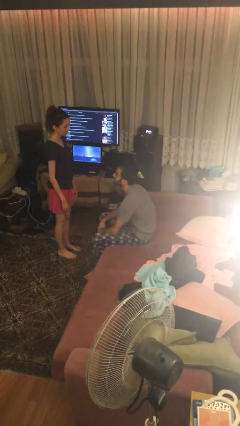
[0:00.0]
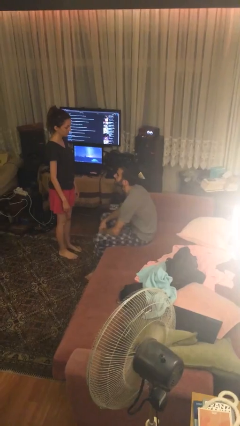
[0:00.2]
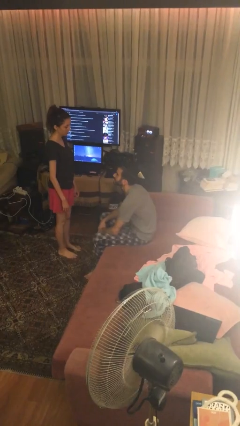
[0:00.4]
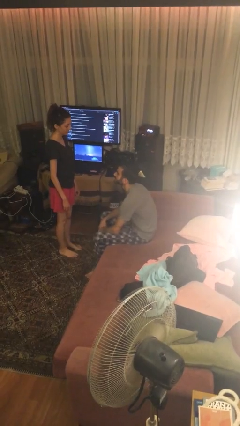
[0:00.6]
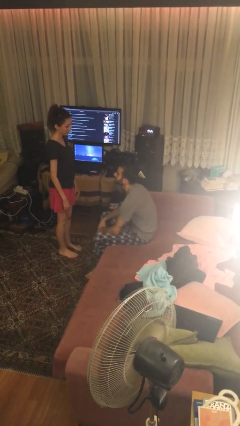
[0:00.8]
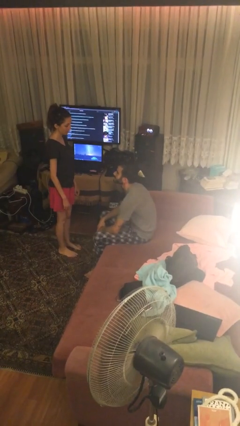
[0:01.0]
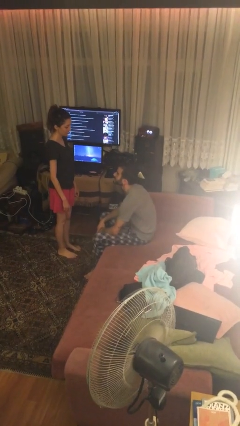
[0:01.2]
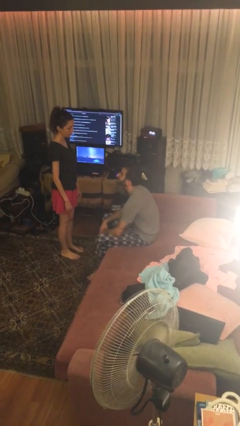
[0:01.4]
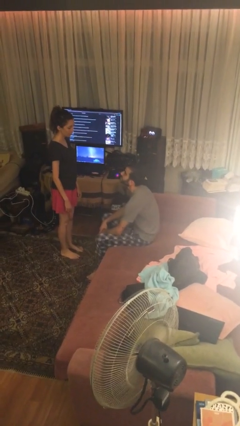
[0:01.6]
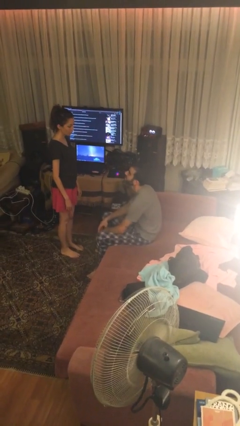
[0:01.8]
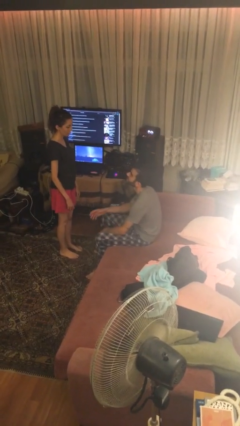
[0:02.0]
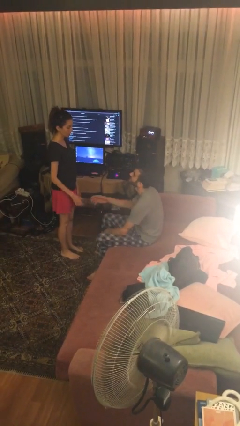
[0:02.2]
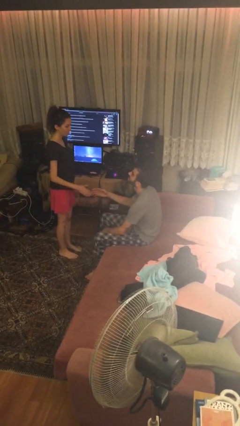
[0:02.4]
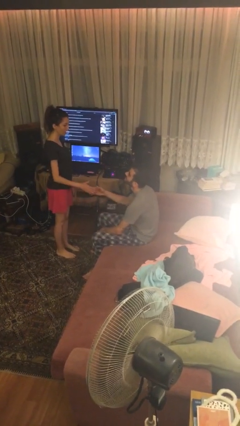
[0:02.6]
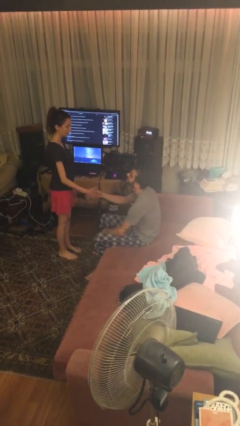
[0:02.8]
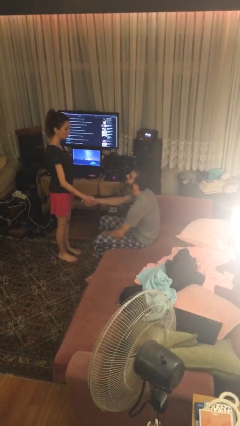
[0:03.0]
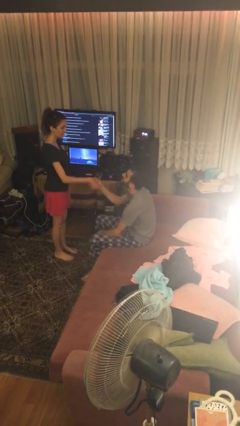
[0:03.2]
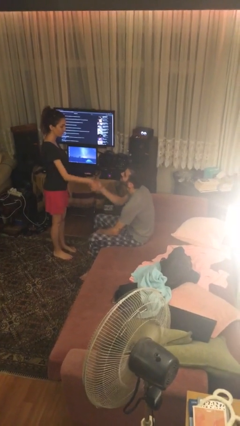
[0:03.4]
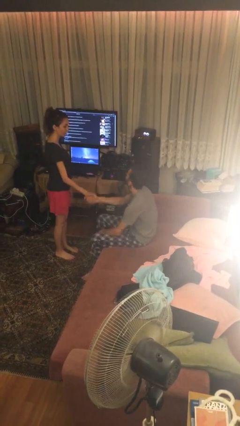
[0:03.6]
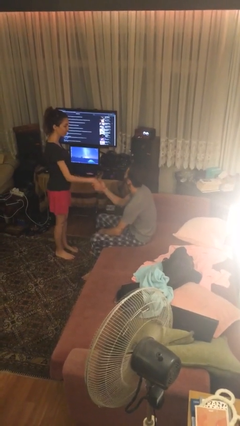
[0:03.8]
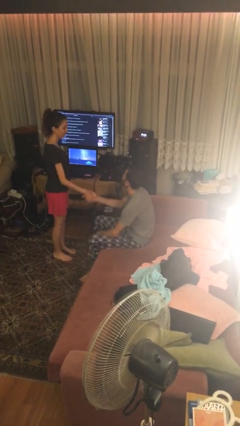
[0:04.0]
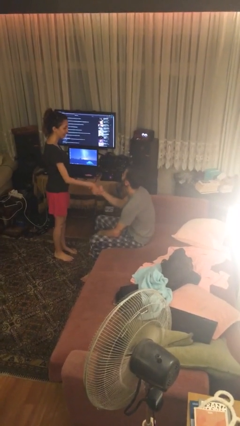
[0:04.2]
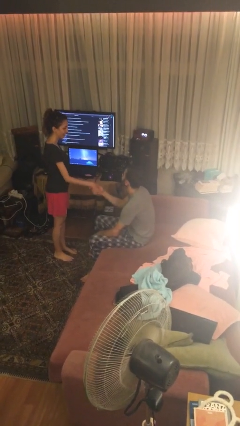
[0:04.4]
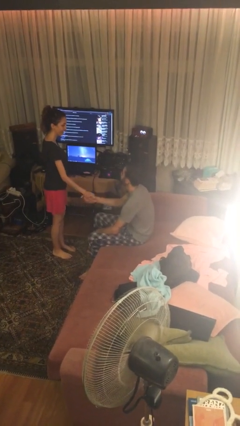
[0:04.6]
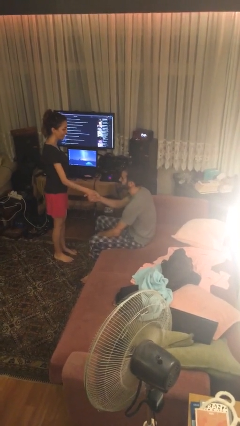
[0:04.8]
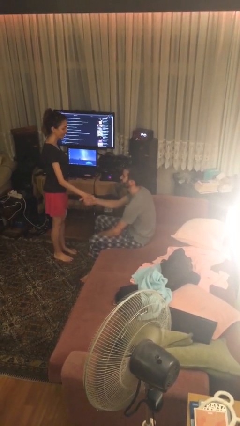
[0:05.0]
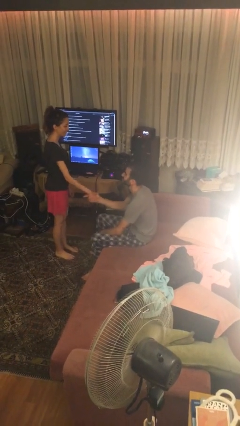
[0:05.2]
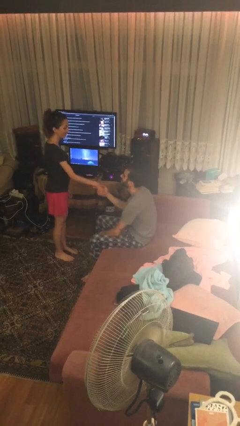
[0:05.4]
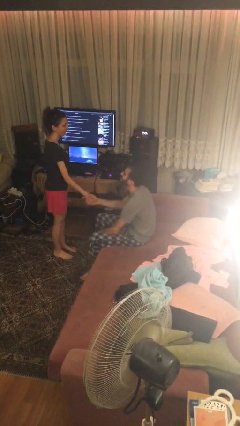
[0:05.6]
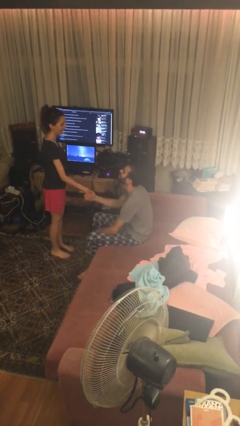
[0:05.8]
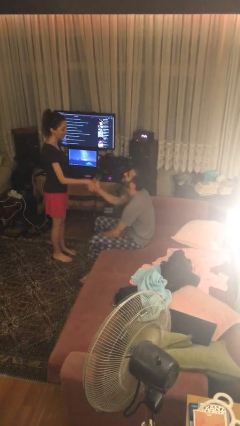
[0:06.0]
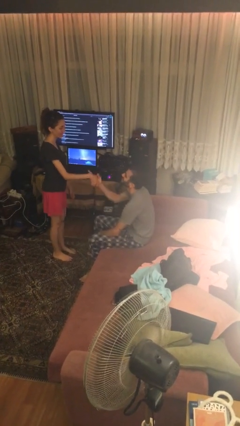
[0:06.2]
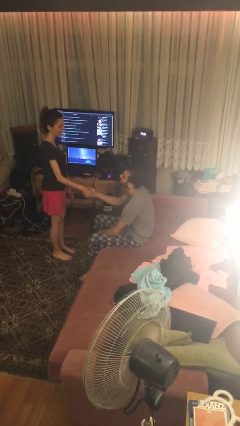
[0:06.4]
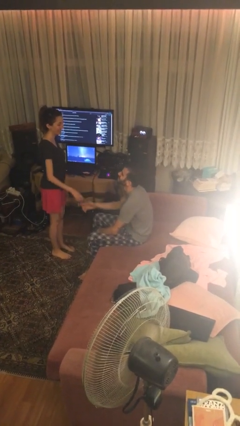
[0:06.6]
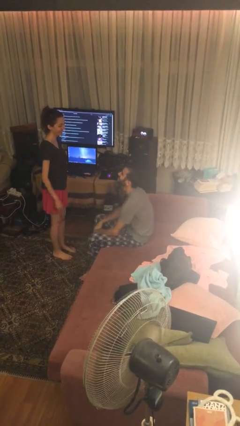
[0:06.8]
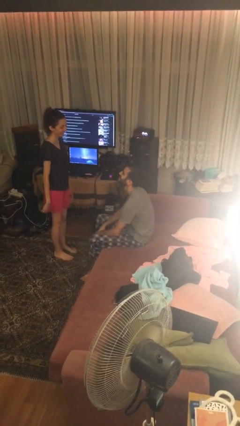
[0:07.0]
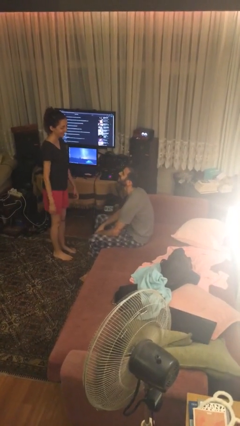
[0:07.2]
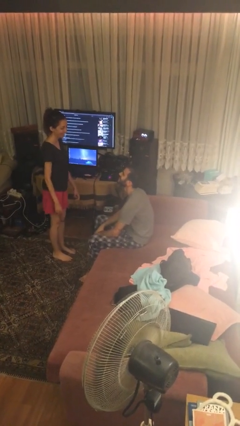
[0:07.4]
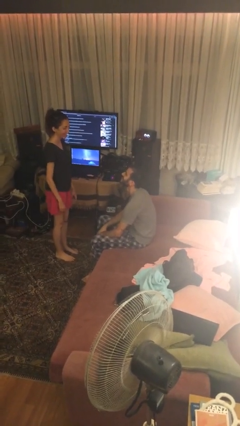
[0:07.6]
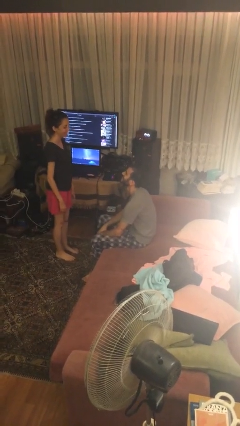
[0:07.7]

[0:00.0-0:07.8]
person shakes hand

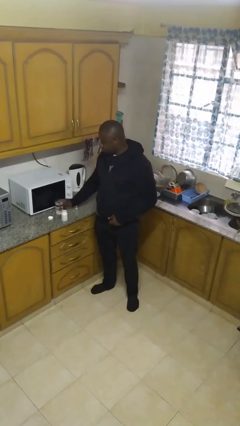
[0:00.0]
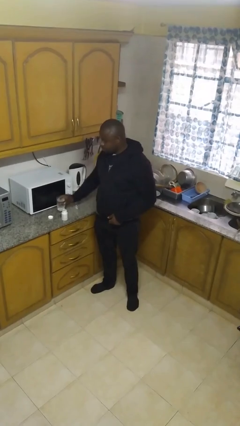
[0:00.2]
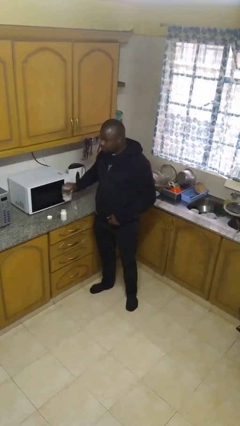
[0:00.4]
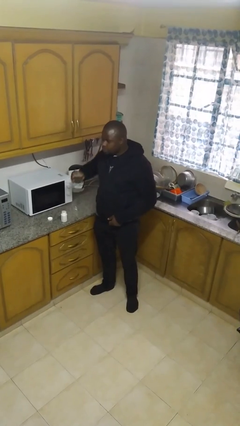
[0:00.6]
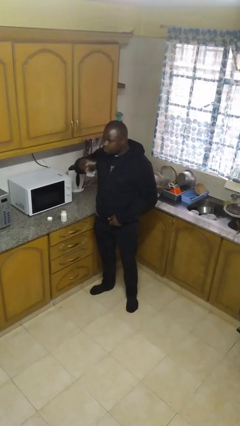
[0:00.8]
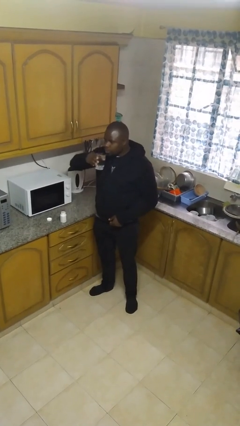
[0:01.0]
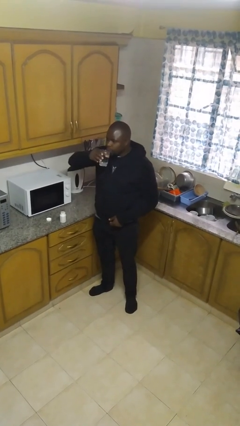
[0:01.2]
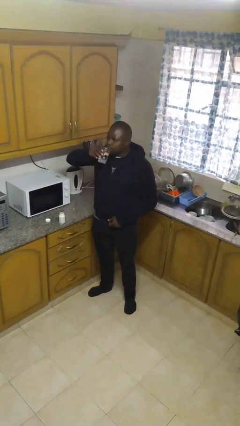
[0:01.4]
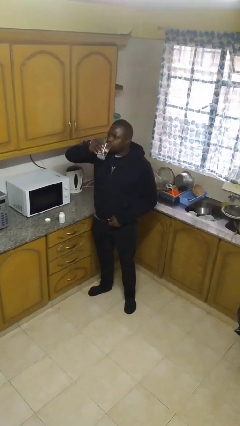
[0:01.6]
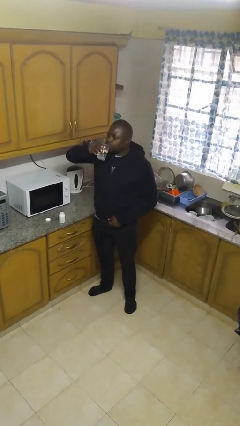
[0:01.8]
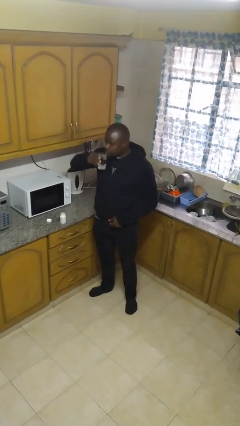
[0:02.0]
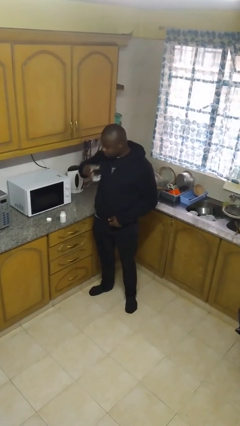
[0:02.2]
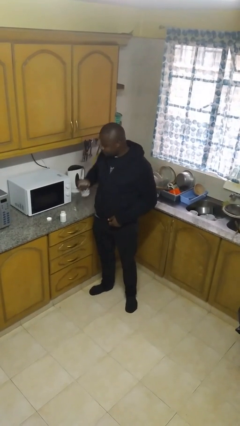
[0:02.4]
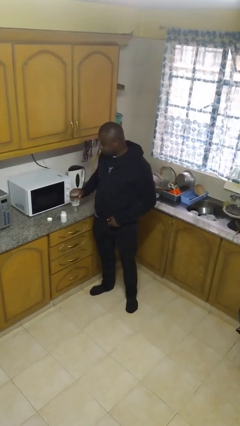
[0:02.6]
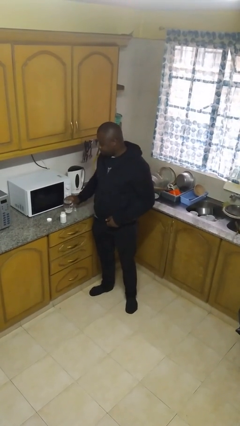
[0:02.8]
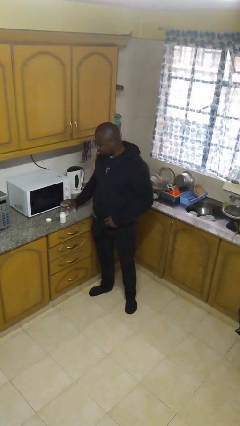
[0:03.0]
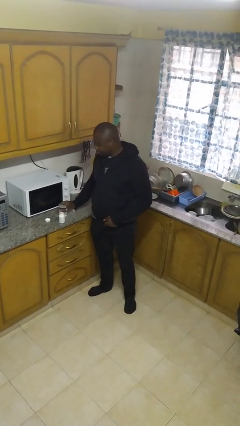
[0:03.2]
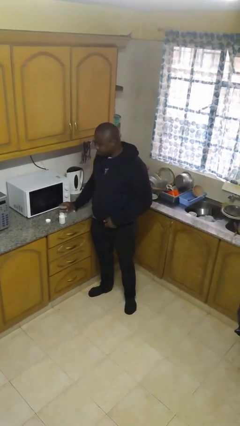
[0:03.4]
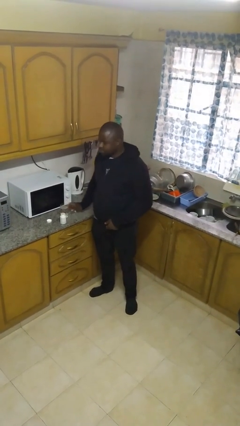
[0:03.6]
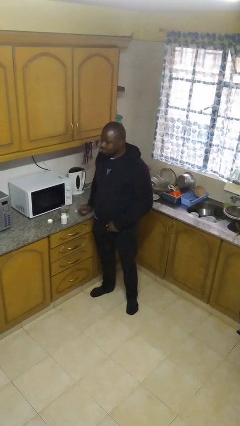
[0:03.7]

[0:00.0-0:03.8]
person drinks from cup

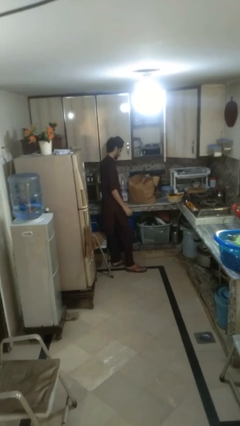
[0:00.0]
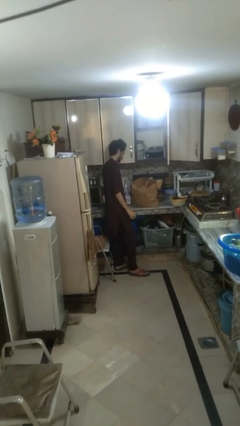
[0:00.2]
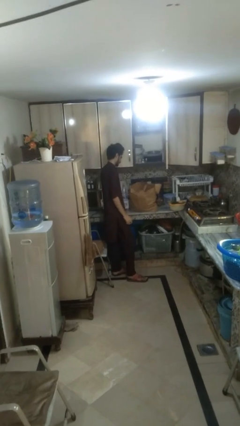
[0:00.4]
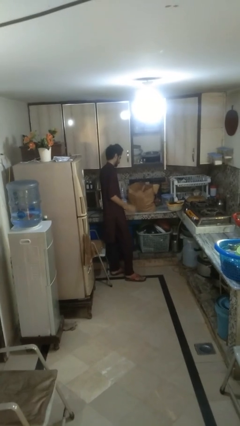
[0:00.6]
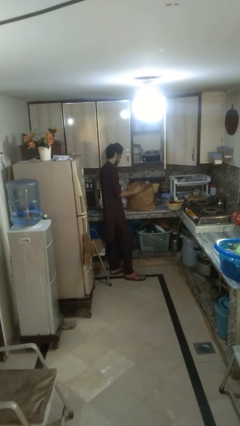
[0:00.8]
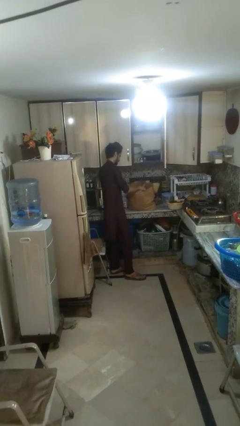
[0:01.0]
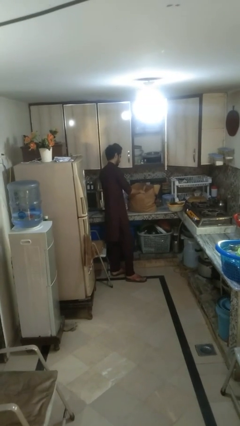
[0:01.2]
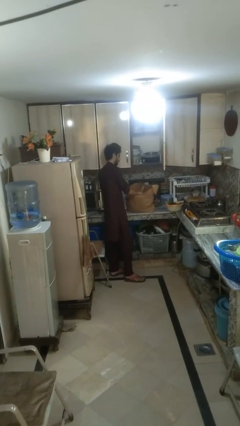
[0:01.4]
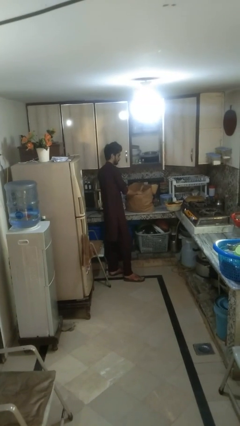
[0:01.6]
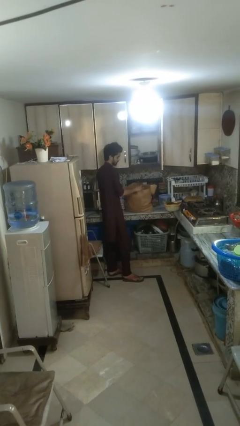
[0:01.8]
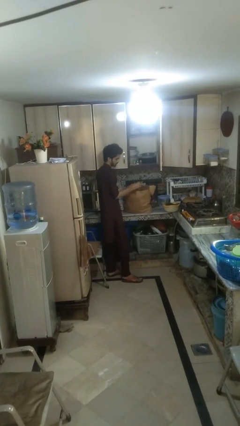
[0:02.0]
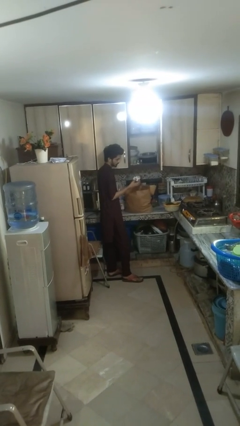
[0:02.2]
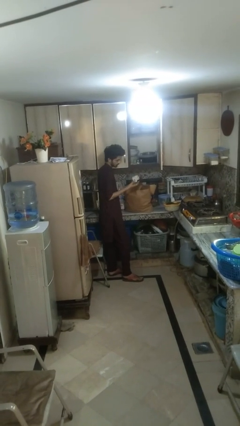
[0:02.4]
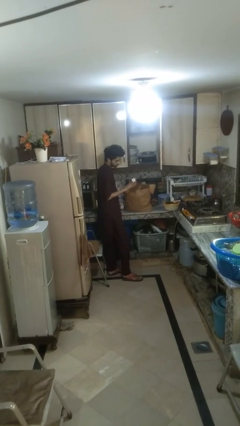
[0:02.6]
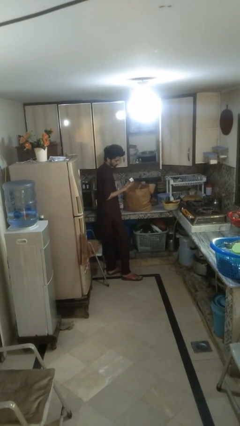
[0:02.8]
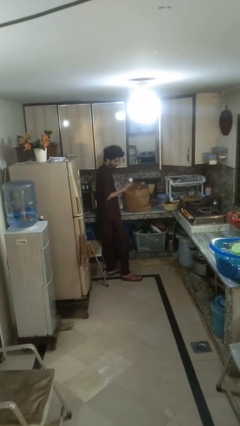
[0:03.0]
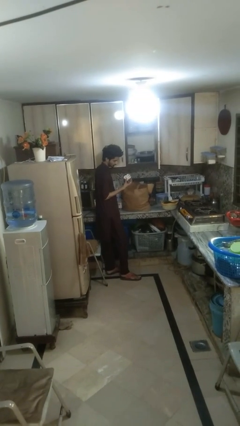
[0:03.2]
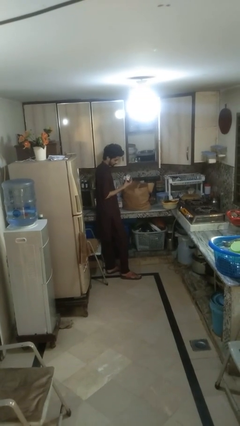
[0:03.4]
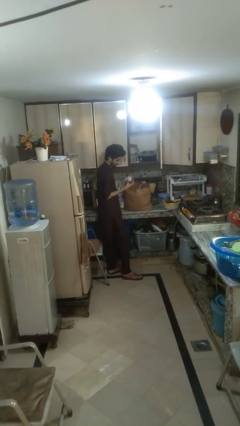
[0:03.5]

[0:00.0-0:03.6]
person takes object from bag

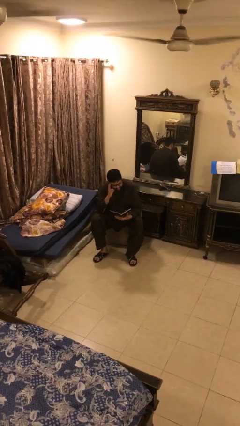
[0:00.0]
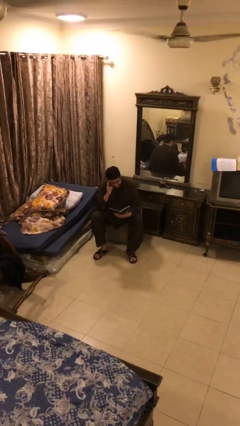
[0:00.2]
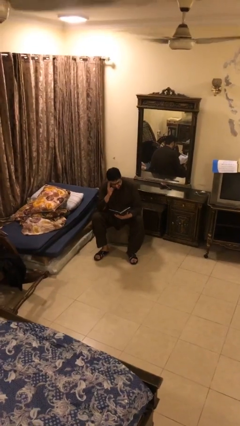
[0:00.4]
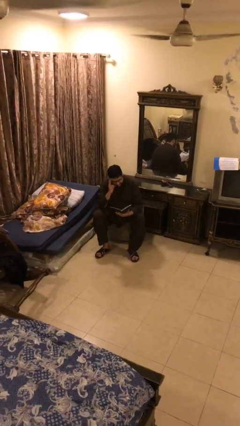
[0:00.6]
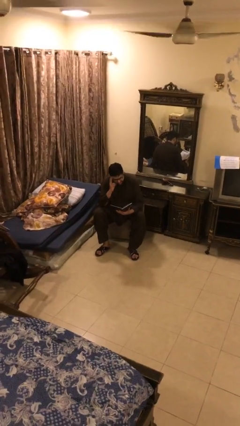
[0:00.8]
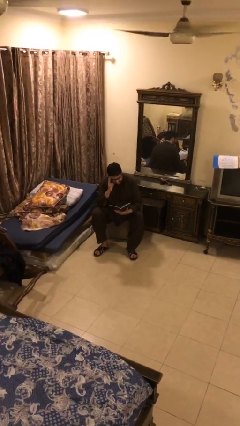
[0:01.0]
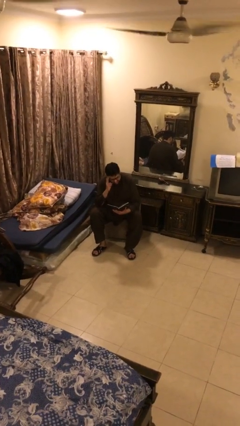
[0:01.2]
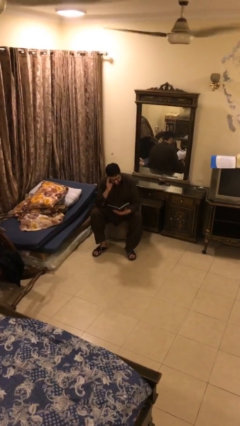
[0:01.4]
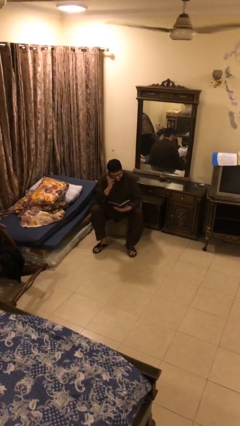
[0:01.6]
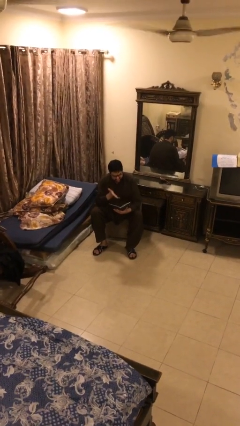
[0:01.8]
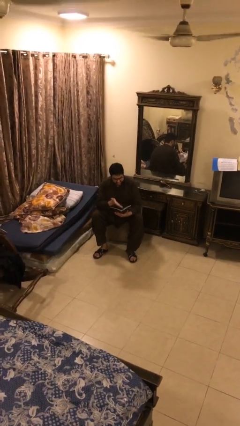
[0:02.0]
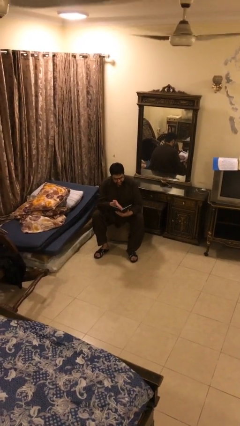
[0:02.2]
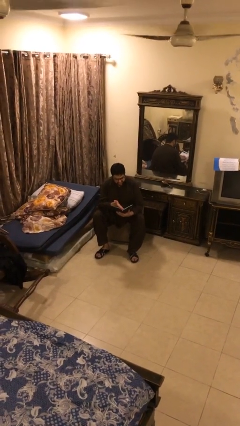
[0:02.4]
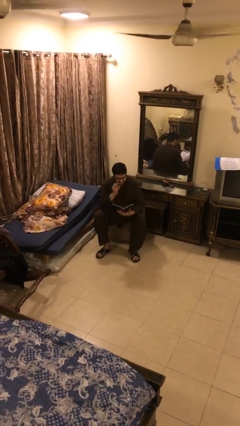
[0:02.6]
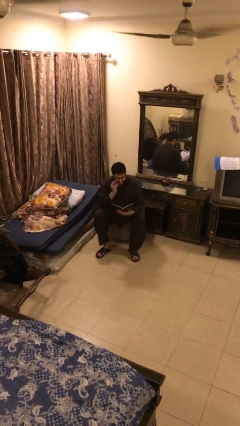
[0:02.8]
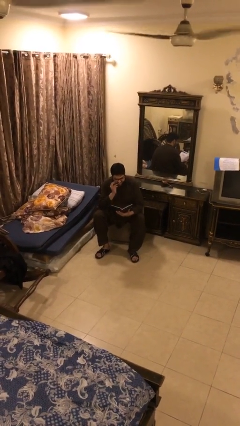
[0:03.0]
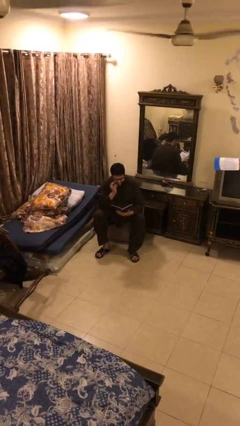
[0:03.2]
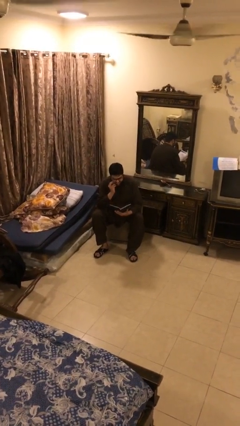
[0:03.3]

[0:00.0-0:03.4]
person reads document
